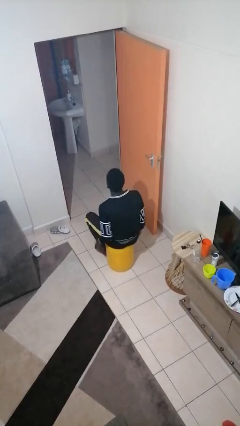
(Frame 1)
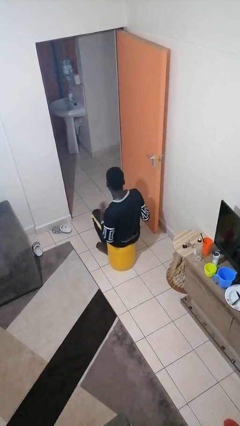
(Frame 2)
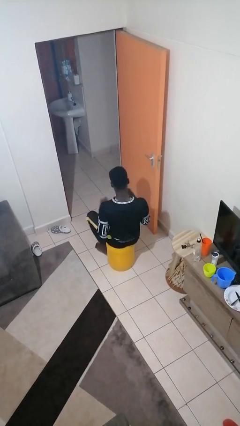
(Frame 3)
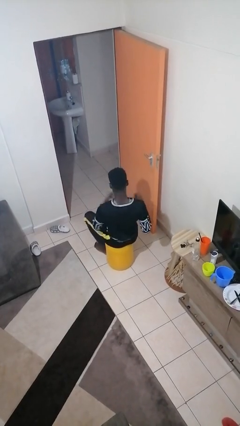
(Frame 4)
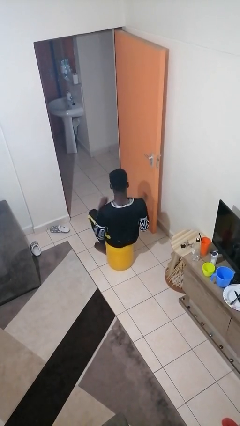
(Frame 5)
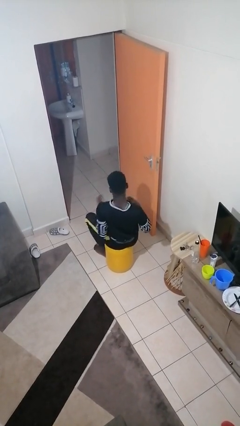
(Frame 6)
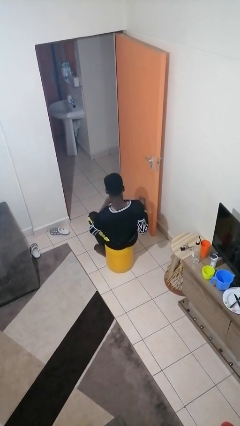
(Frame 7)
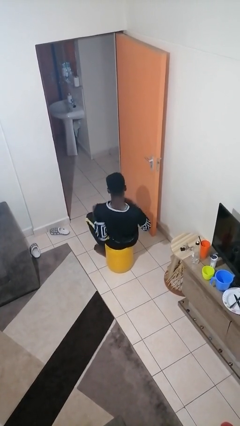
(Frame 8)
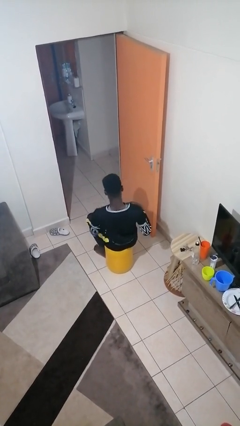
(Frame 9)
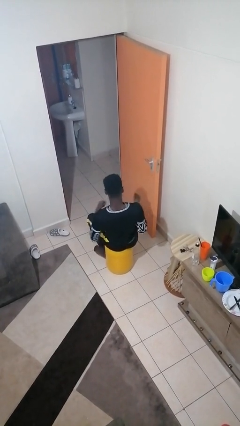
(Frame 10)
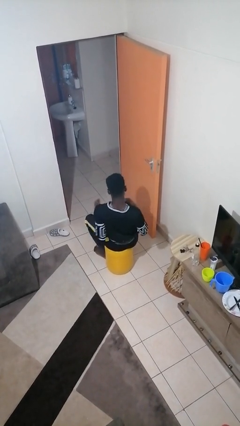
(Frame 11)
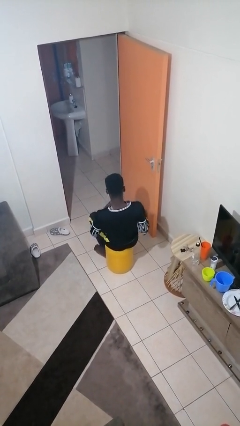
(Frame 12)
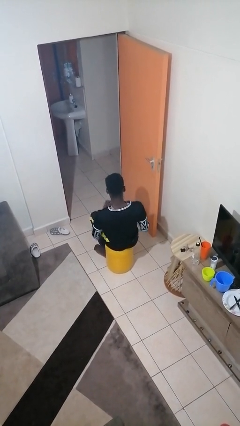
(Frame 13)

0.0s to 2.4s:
person drums on chest

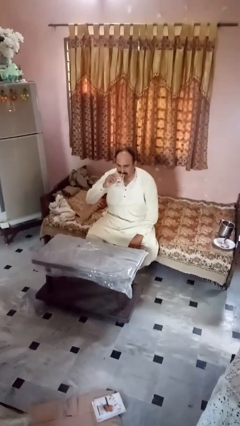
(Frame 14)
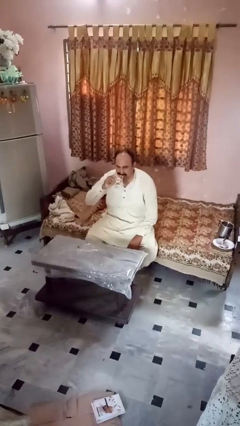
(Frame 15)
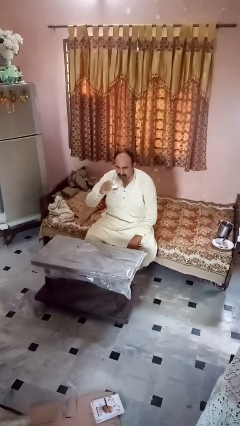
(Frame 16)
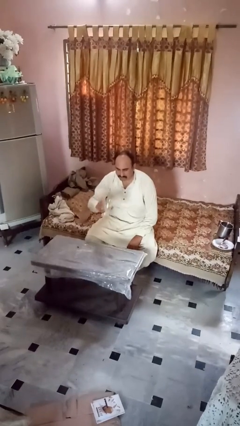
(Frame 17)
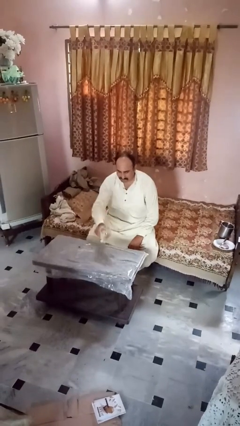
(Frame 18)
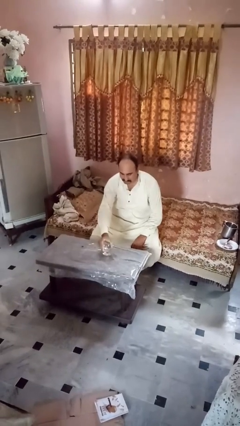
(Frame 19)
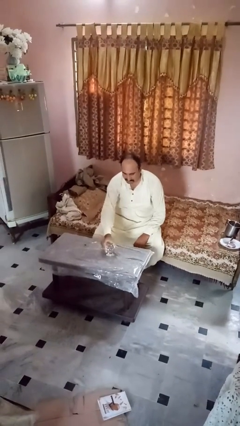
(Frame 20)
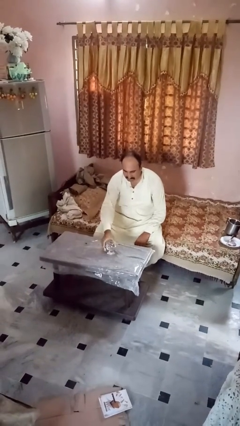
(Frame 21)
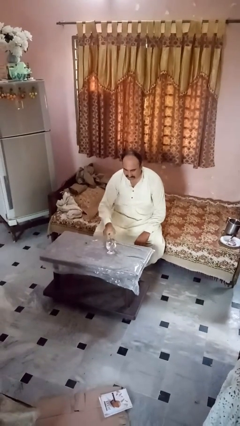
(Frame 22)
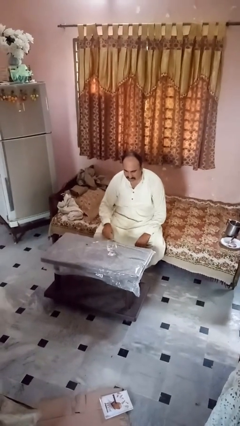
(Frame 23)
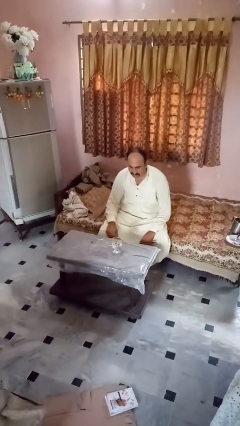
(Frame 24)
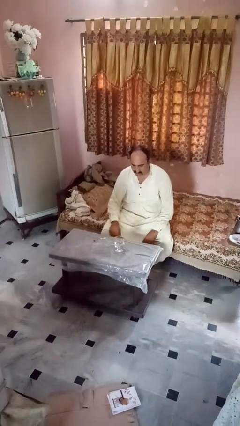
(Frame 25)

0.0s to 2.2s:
person puts down object on table

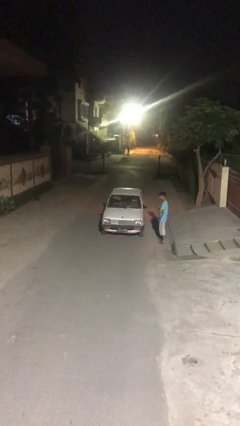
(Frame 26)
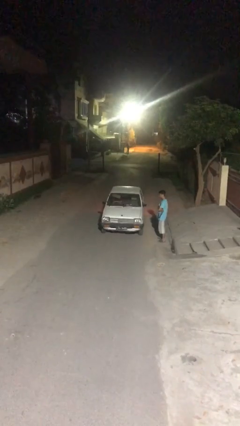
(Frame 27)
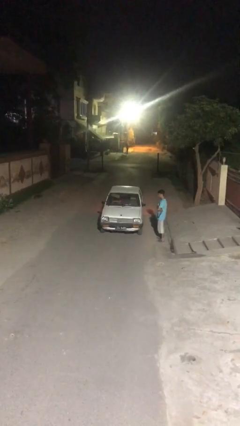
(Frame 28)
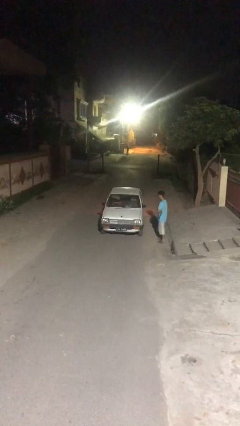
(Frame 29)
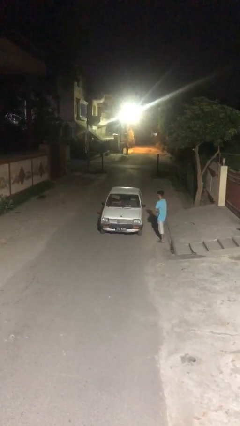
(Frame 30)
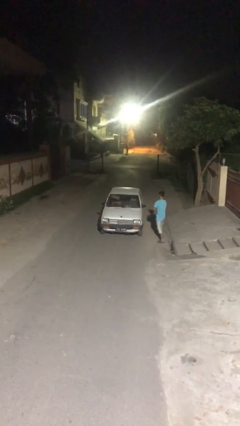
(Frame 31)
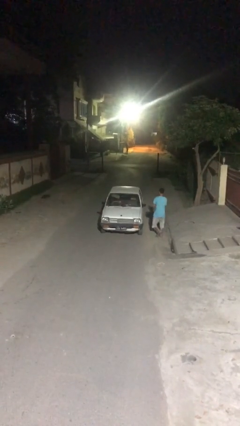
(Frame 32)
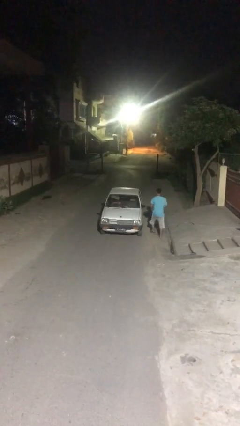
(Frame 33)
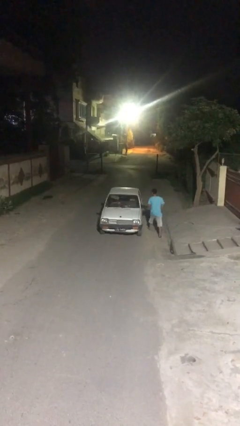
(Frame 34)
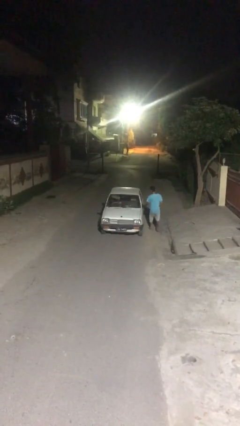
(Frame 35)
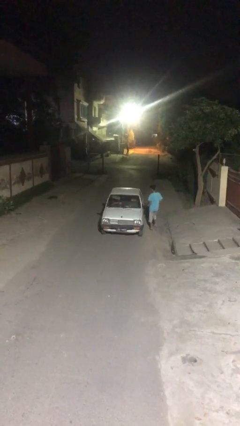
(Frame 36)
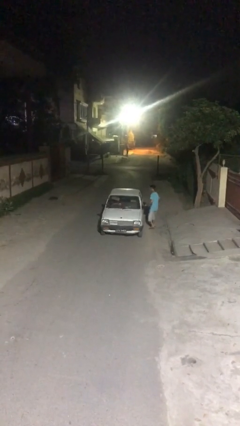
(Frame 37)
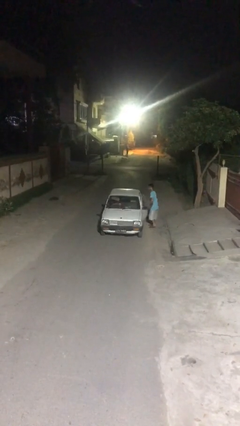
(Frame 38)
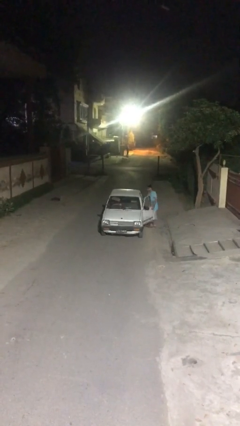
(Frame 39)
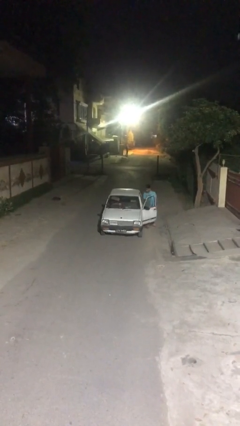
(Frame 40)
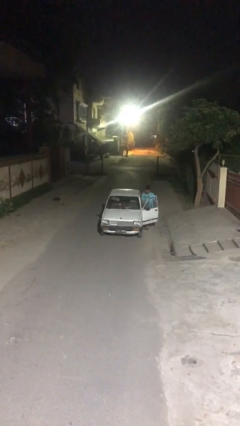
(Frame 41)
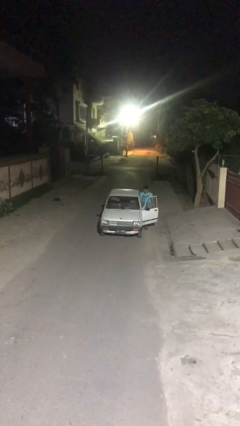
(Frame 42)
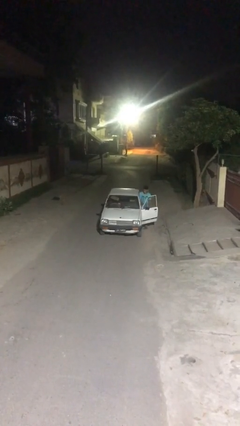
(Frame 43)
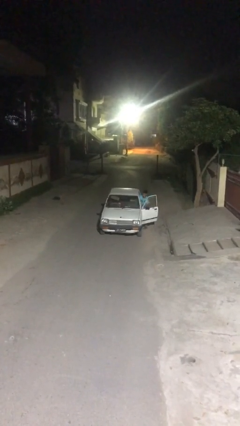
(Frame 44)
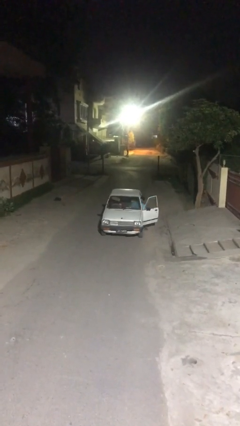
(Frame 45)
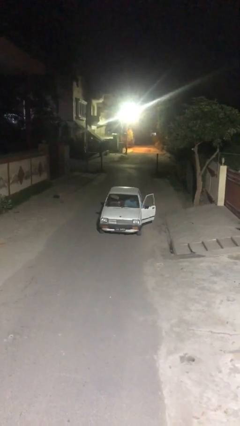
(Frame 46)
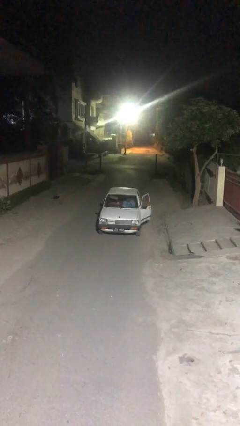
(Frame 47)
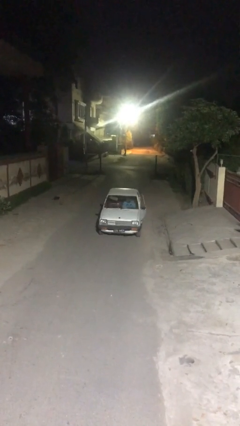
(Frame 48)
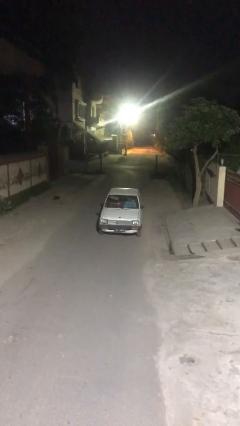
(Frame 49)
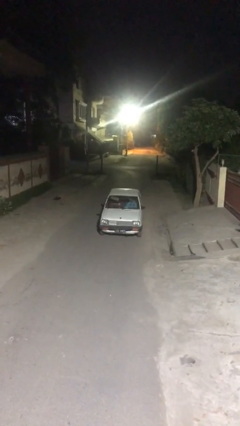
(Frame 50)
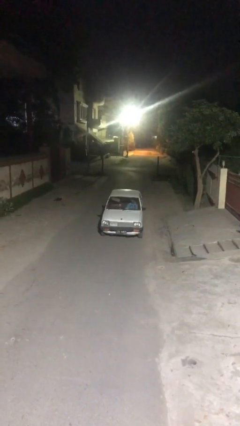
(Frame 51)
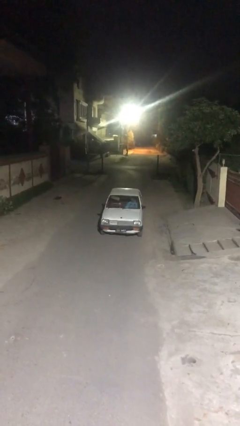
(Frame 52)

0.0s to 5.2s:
car picks up person

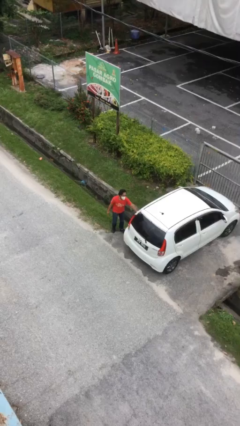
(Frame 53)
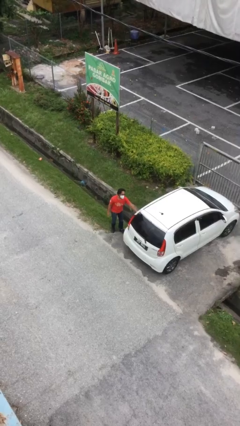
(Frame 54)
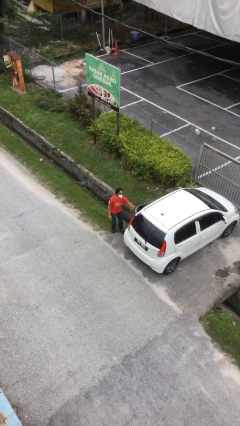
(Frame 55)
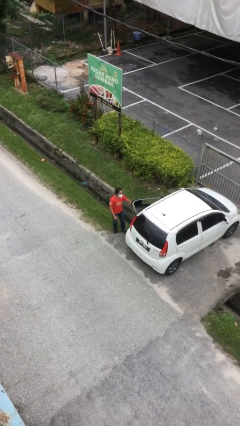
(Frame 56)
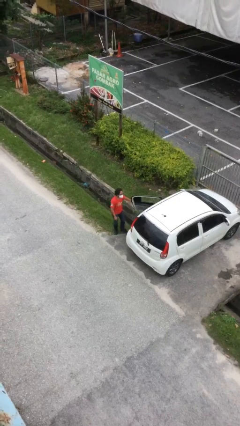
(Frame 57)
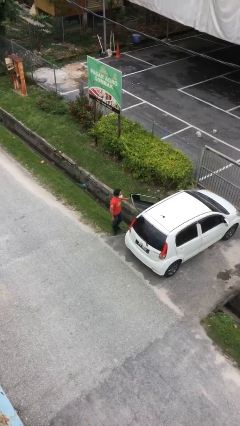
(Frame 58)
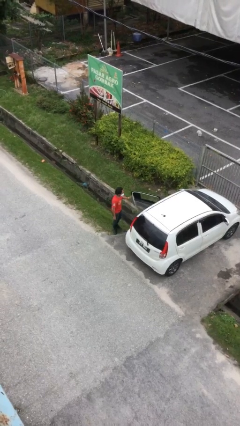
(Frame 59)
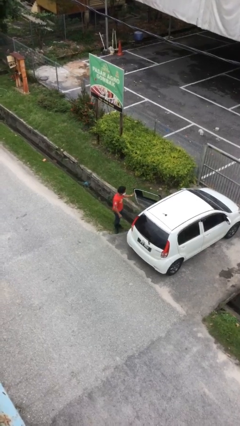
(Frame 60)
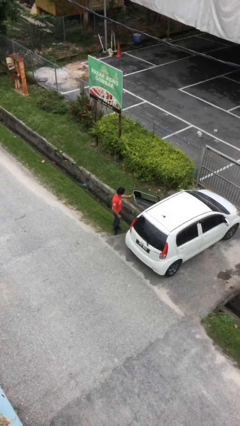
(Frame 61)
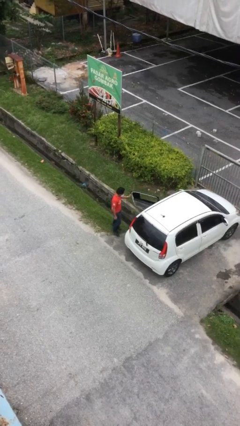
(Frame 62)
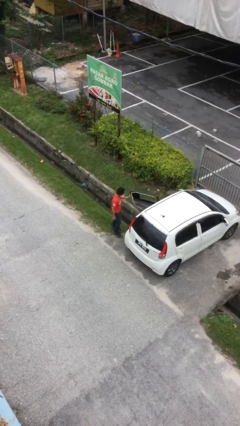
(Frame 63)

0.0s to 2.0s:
person opens car door

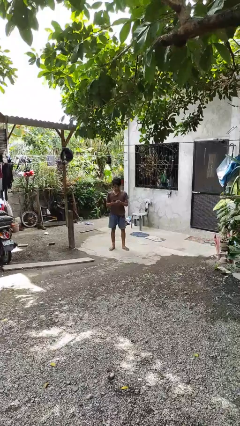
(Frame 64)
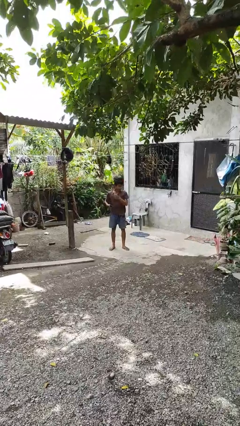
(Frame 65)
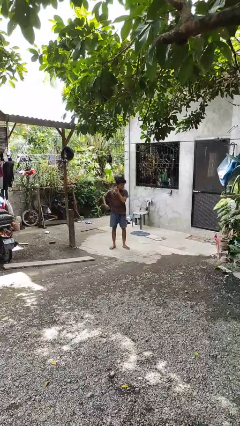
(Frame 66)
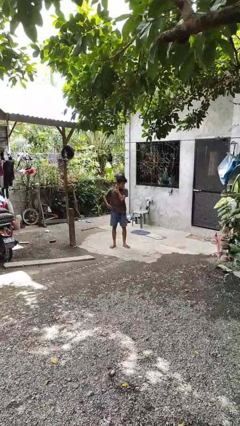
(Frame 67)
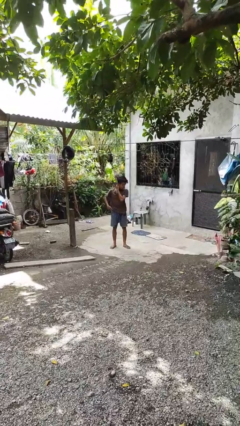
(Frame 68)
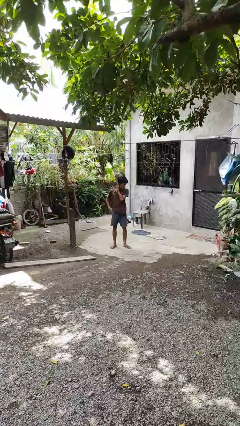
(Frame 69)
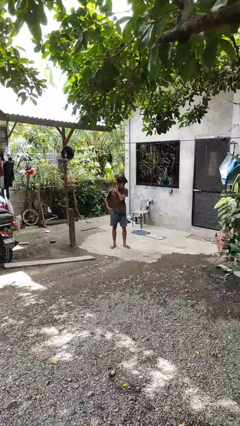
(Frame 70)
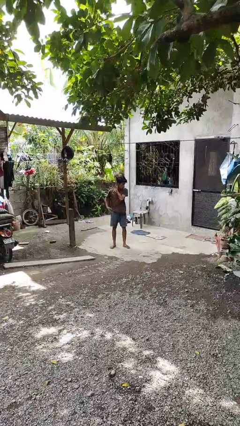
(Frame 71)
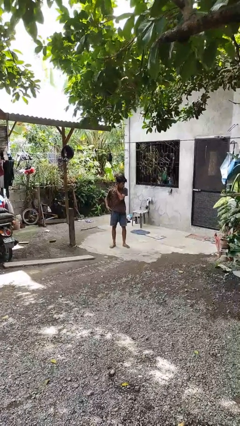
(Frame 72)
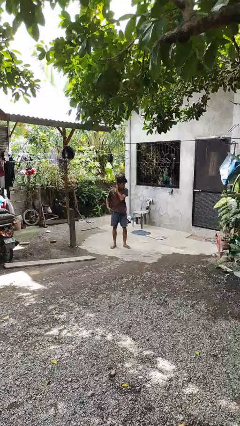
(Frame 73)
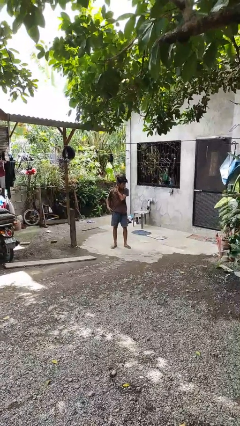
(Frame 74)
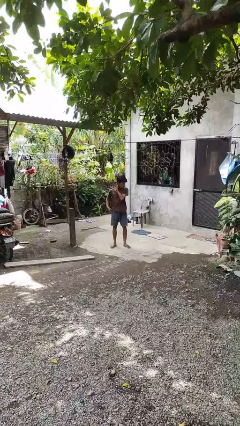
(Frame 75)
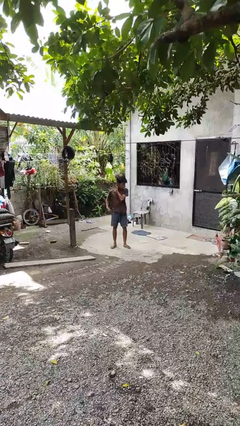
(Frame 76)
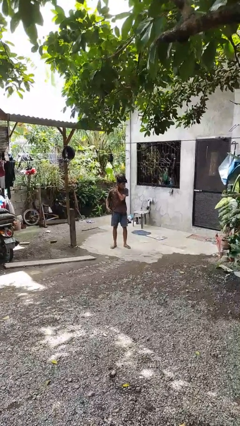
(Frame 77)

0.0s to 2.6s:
person puts phone into pocket

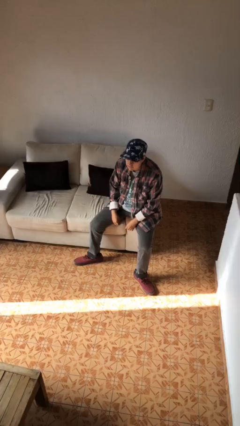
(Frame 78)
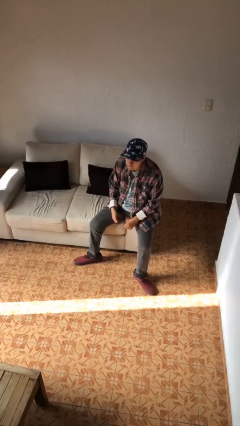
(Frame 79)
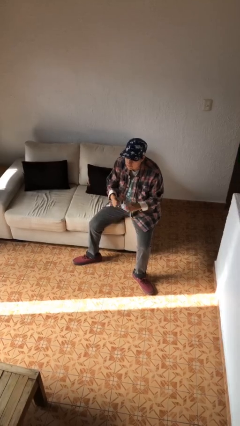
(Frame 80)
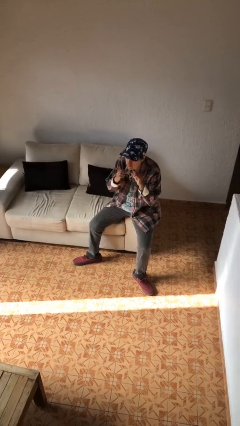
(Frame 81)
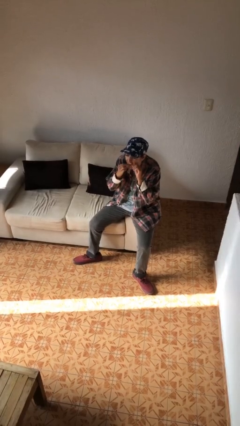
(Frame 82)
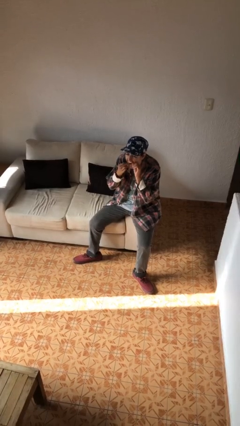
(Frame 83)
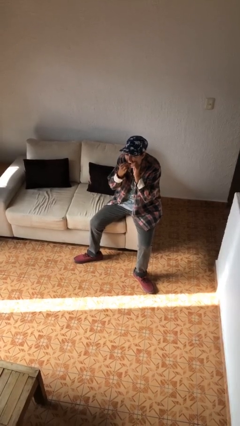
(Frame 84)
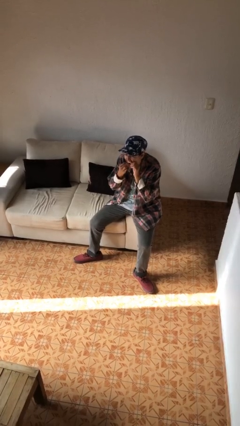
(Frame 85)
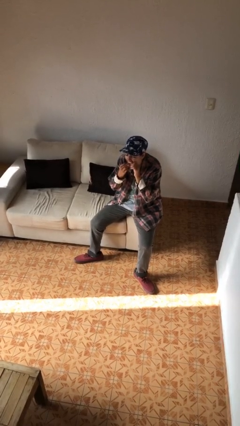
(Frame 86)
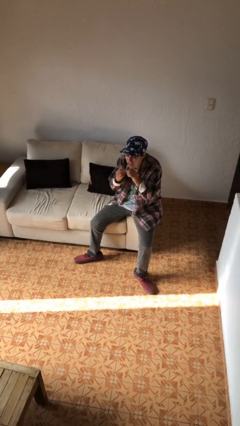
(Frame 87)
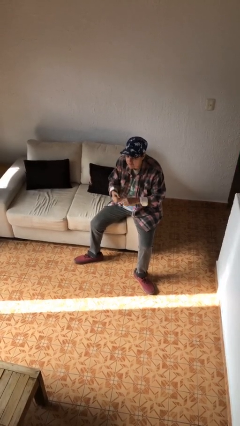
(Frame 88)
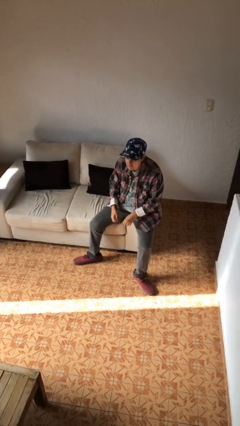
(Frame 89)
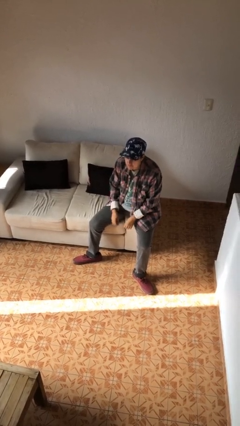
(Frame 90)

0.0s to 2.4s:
person flosses

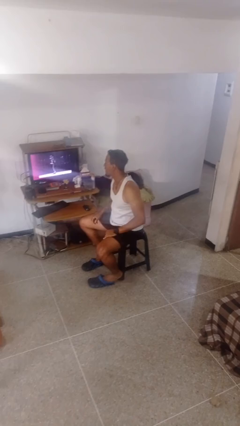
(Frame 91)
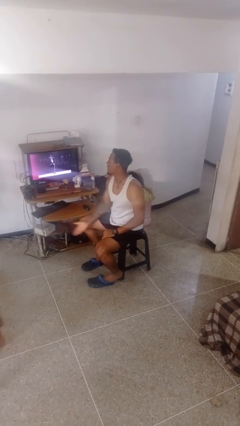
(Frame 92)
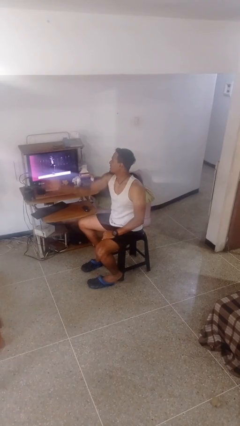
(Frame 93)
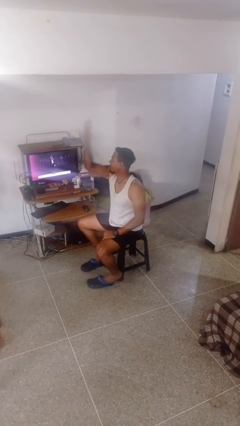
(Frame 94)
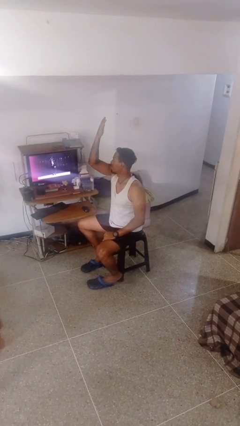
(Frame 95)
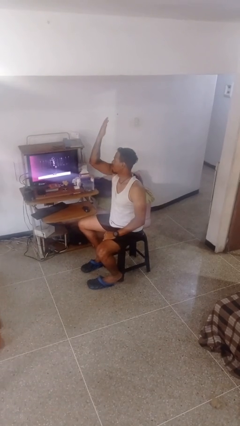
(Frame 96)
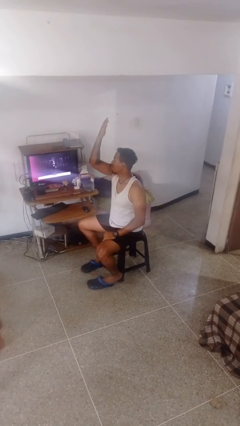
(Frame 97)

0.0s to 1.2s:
person gestures swipe up
